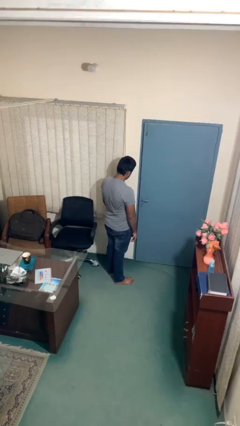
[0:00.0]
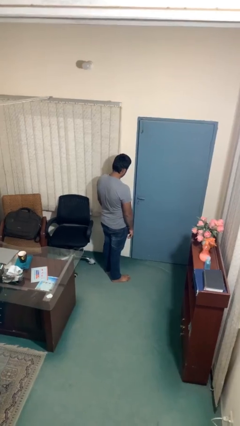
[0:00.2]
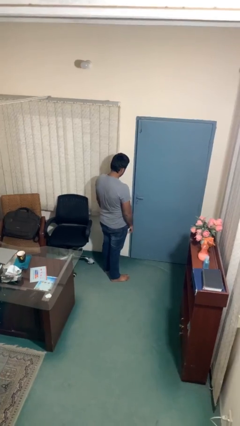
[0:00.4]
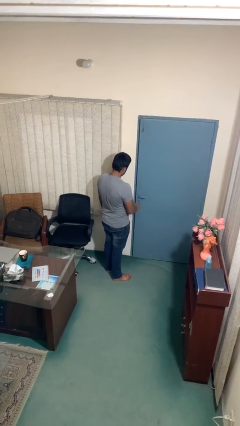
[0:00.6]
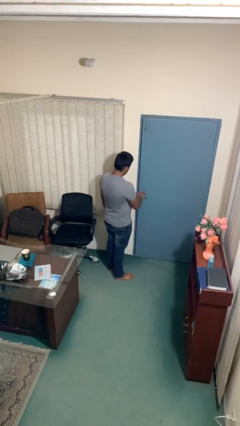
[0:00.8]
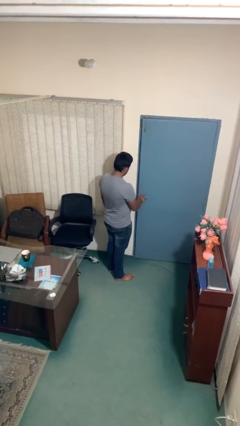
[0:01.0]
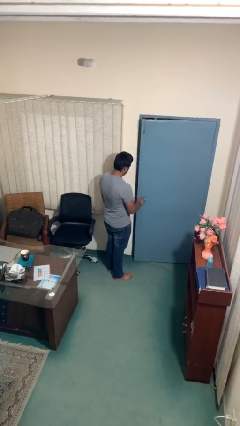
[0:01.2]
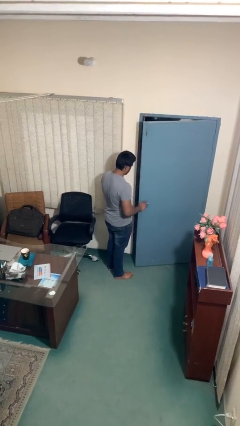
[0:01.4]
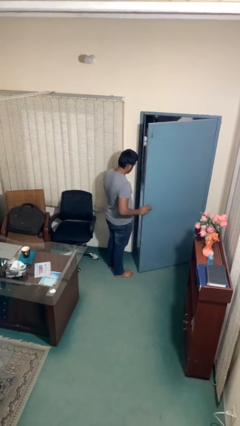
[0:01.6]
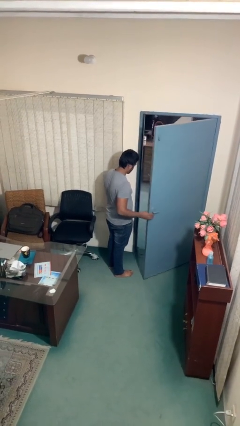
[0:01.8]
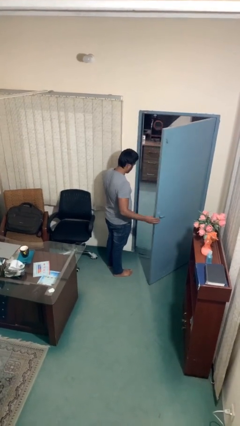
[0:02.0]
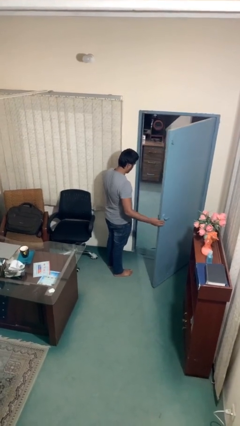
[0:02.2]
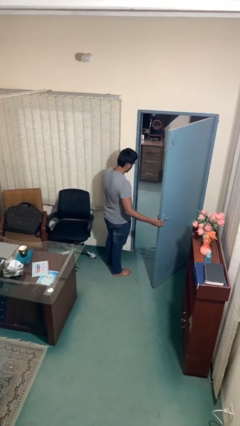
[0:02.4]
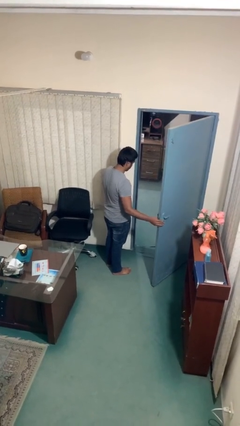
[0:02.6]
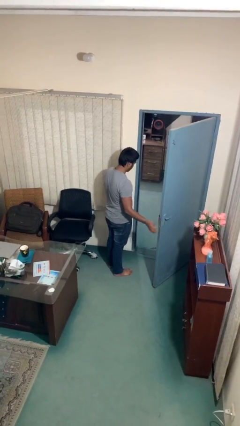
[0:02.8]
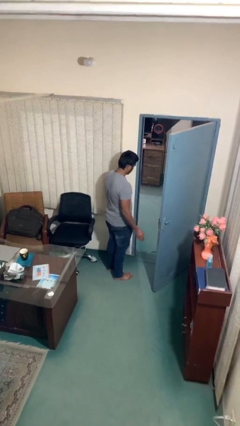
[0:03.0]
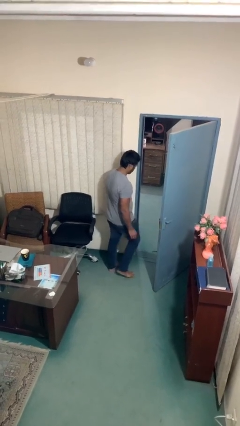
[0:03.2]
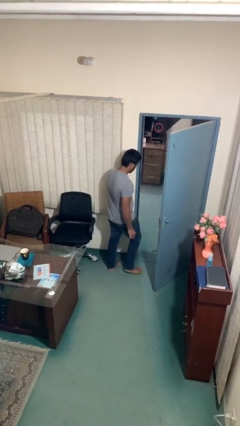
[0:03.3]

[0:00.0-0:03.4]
person opens facility door

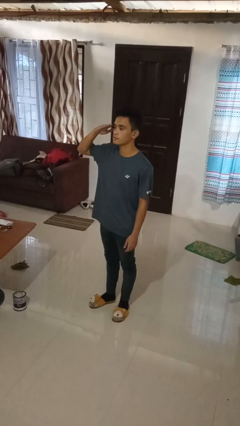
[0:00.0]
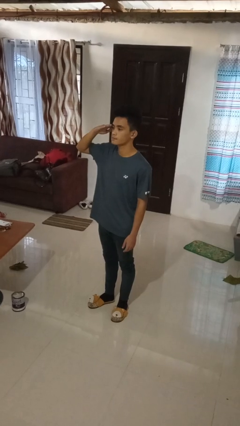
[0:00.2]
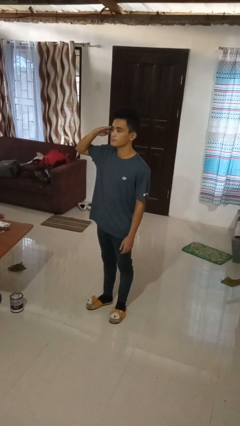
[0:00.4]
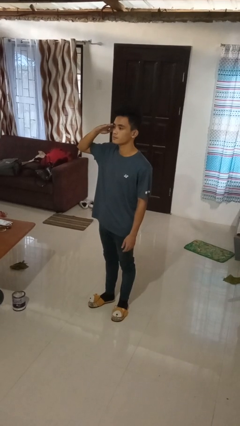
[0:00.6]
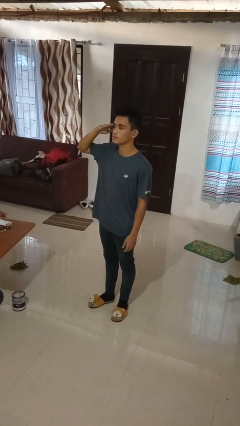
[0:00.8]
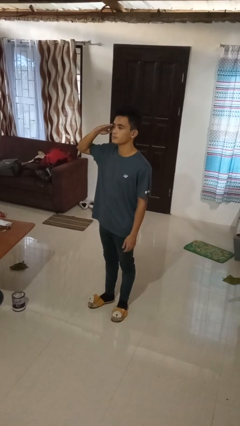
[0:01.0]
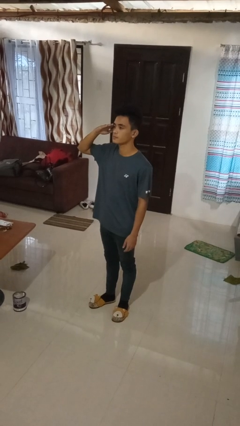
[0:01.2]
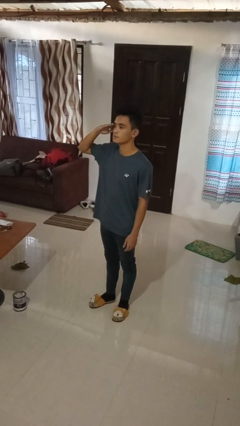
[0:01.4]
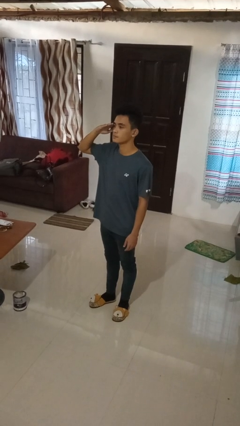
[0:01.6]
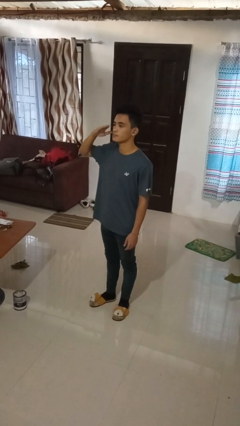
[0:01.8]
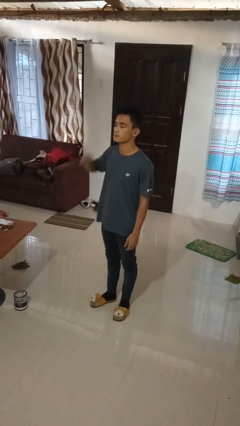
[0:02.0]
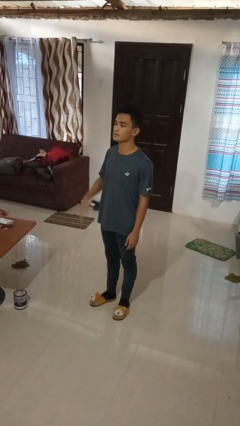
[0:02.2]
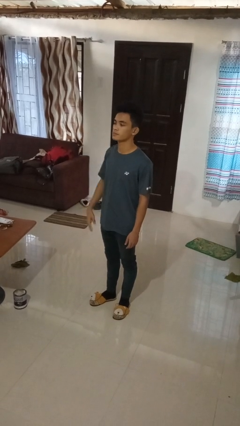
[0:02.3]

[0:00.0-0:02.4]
person salutes

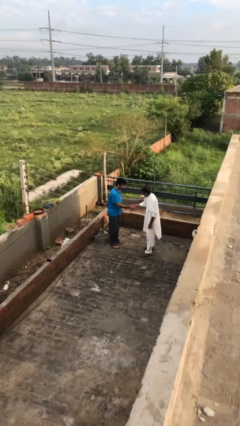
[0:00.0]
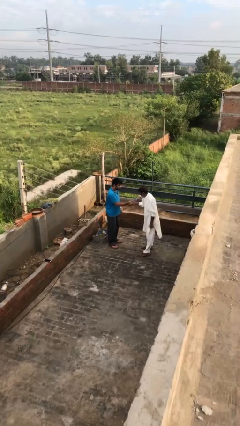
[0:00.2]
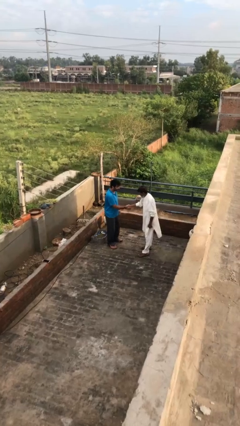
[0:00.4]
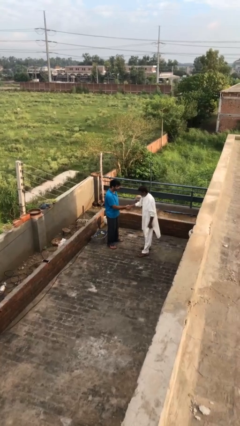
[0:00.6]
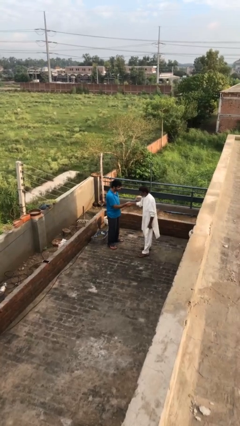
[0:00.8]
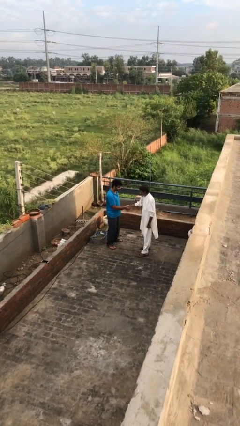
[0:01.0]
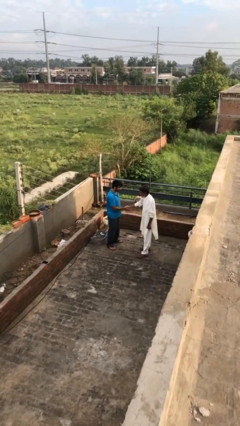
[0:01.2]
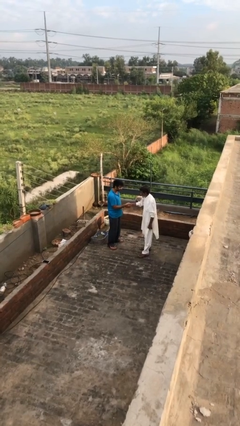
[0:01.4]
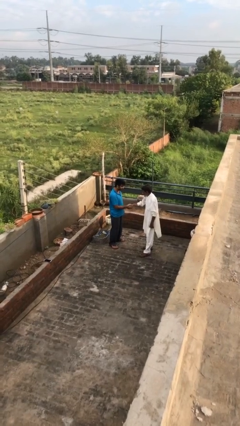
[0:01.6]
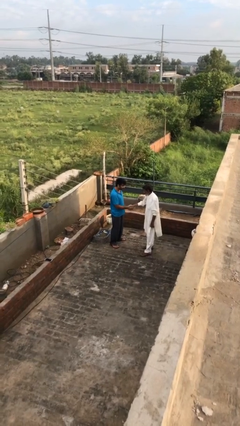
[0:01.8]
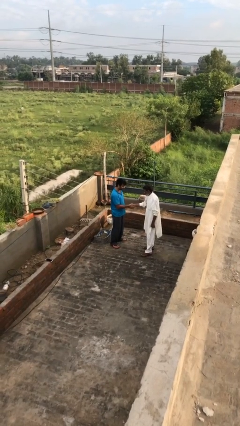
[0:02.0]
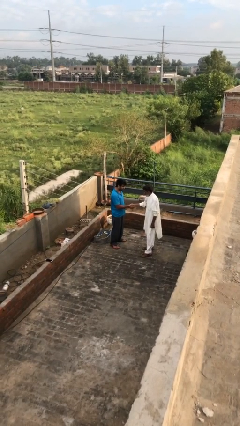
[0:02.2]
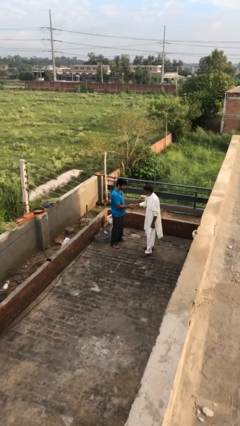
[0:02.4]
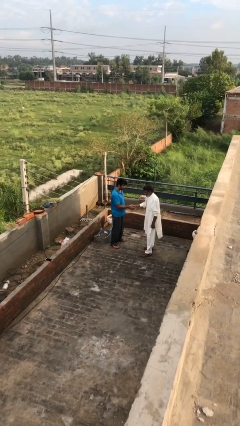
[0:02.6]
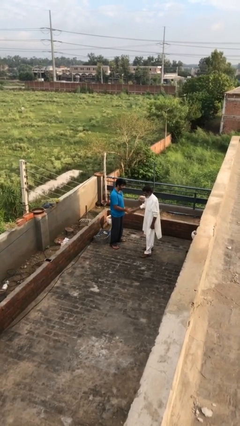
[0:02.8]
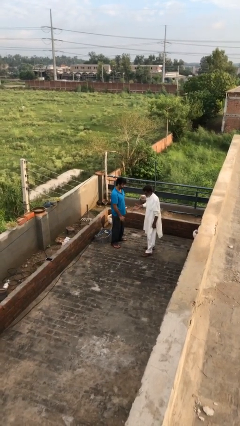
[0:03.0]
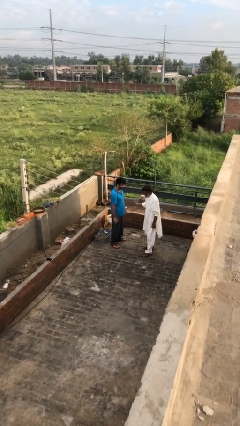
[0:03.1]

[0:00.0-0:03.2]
person shakes hand

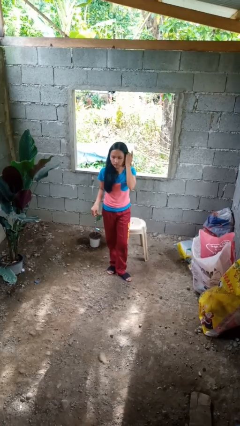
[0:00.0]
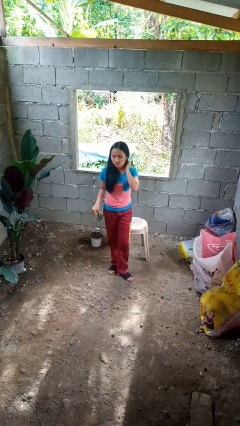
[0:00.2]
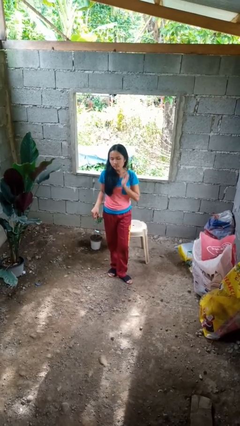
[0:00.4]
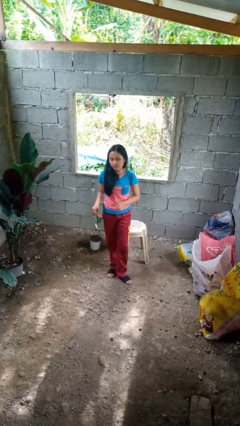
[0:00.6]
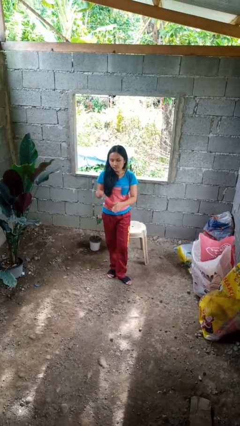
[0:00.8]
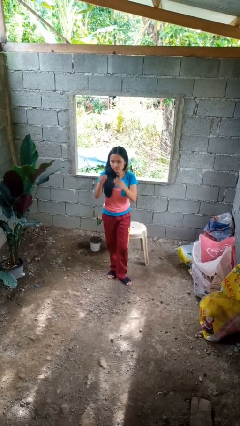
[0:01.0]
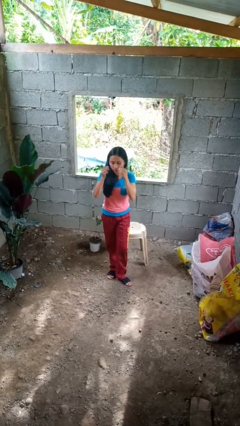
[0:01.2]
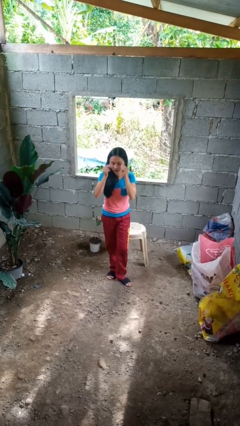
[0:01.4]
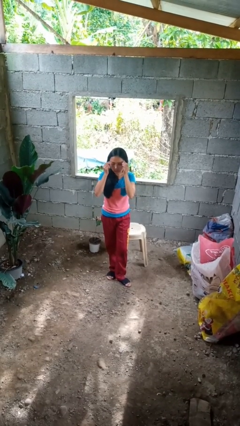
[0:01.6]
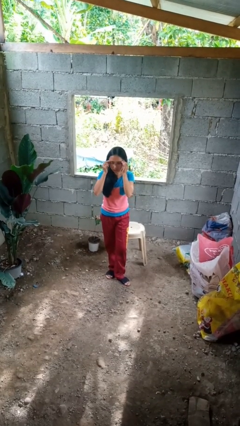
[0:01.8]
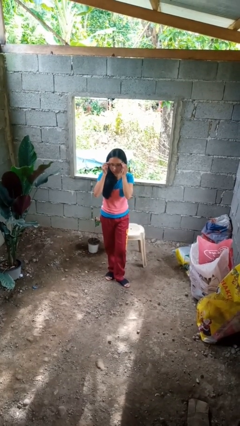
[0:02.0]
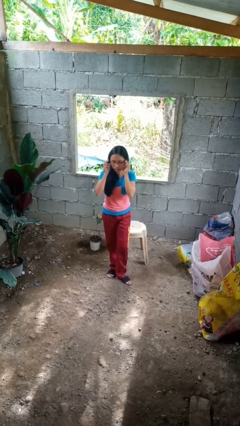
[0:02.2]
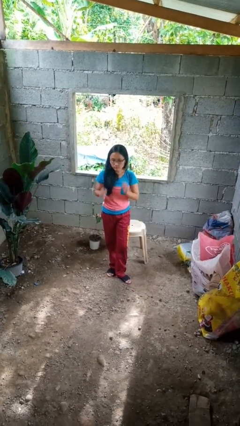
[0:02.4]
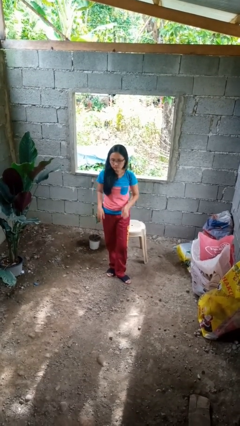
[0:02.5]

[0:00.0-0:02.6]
person puts on glasses

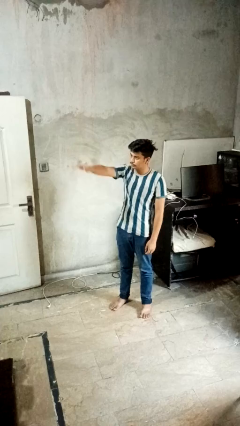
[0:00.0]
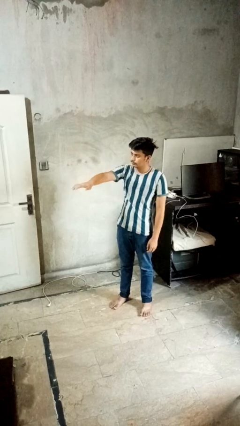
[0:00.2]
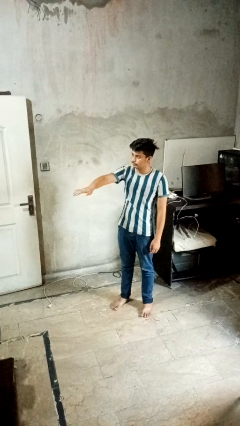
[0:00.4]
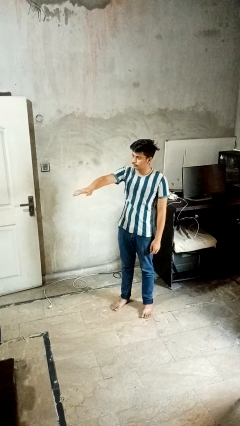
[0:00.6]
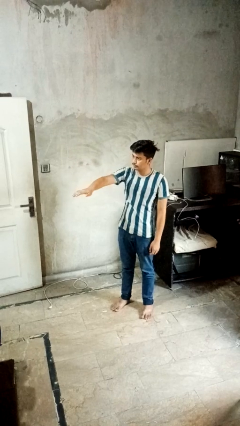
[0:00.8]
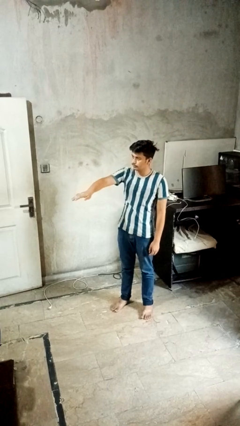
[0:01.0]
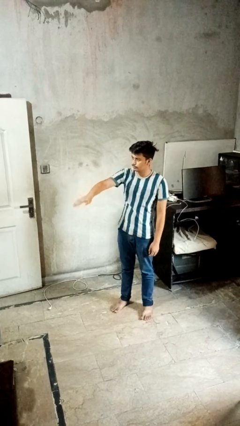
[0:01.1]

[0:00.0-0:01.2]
person gestures swipe down

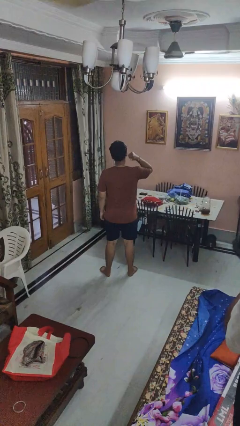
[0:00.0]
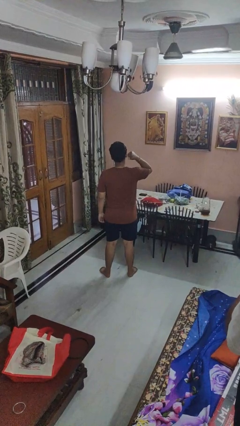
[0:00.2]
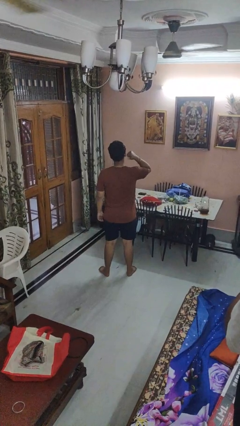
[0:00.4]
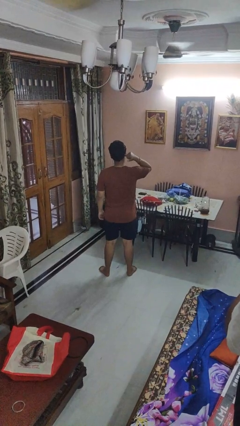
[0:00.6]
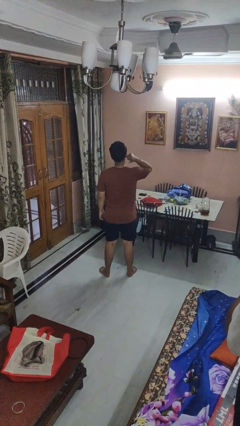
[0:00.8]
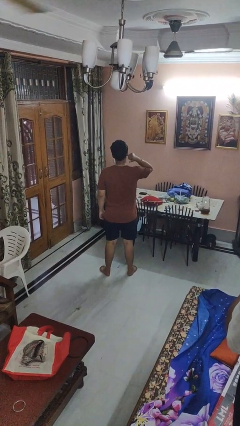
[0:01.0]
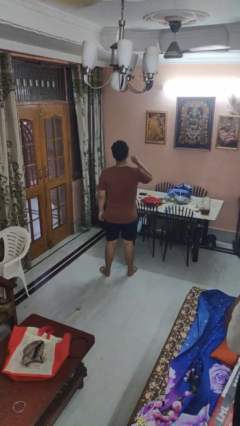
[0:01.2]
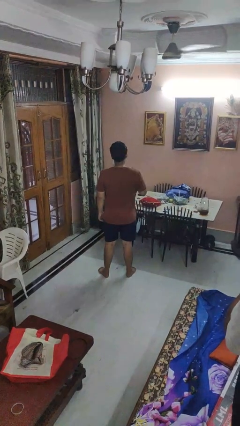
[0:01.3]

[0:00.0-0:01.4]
person gestures behind me

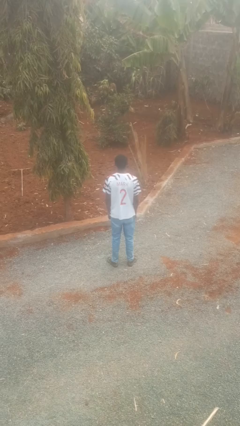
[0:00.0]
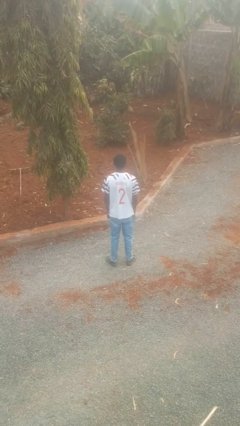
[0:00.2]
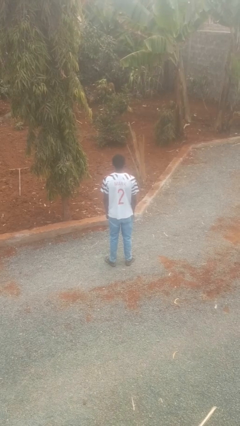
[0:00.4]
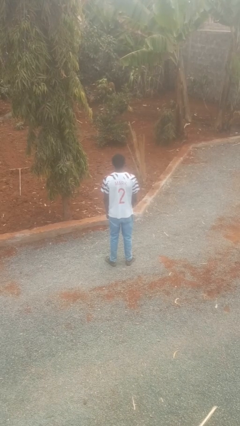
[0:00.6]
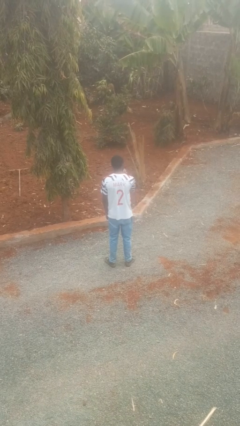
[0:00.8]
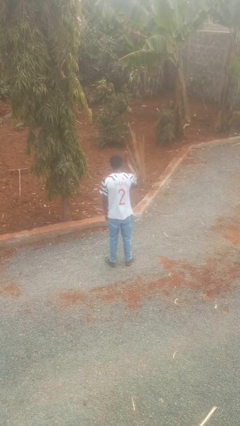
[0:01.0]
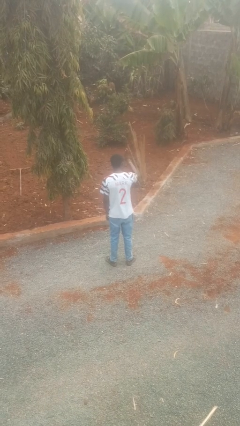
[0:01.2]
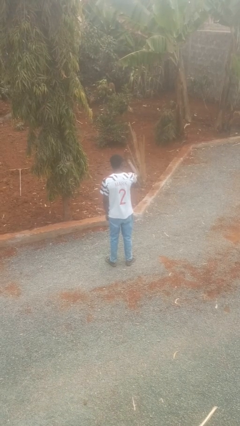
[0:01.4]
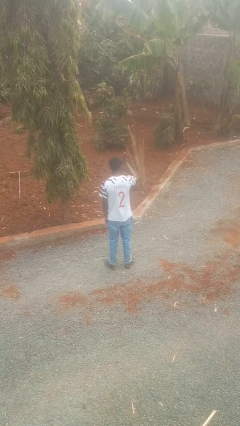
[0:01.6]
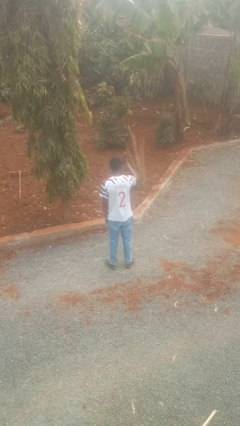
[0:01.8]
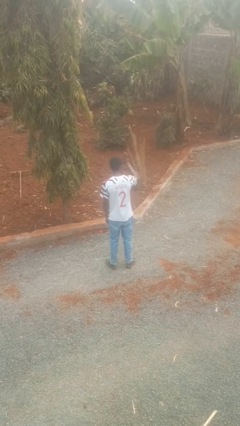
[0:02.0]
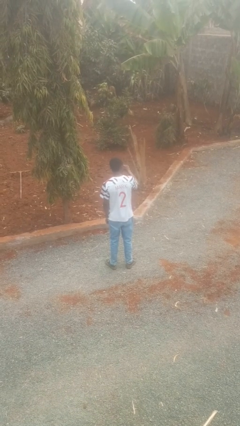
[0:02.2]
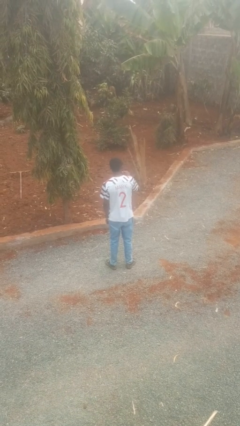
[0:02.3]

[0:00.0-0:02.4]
person gestures stop

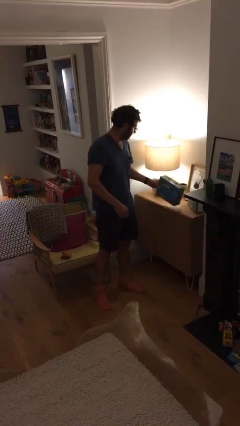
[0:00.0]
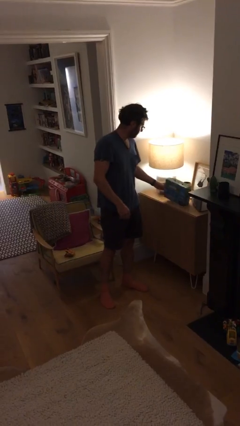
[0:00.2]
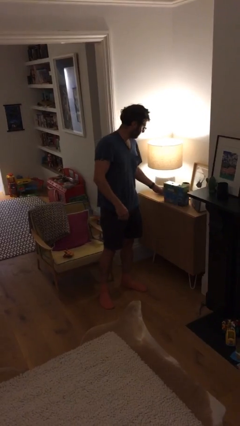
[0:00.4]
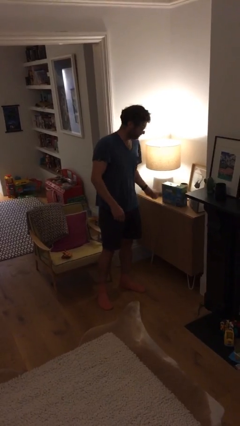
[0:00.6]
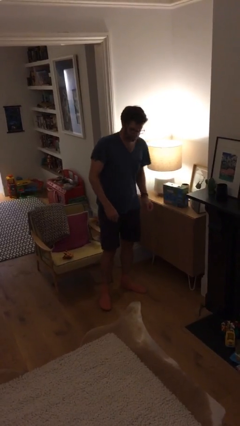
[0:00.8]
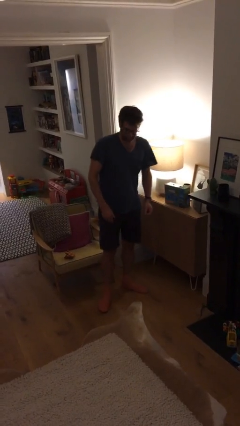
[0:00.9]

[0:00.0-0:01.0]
person puts down object on table
